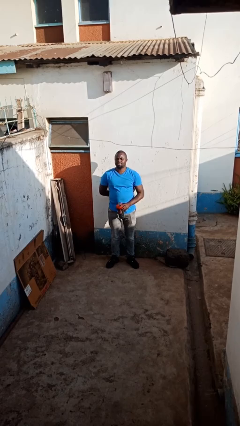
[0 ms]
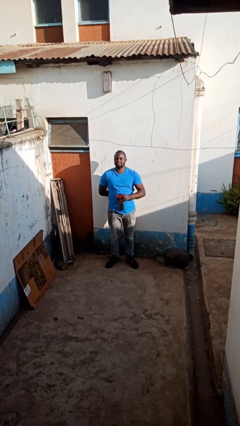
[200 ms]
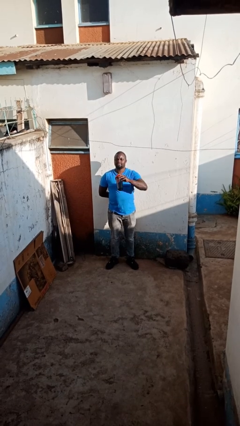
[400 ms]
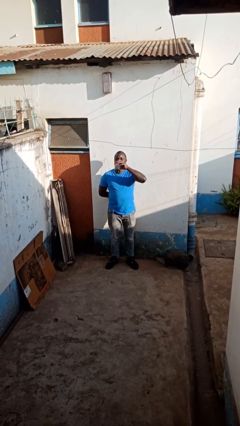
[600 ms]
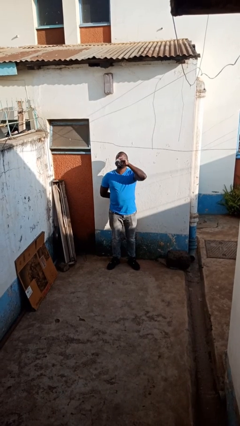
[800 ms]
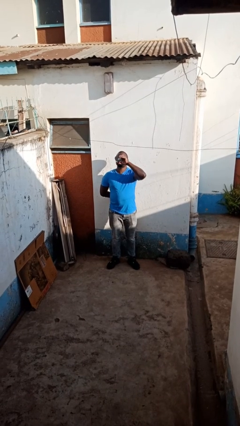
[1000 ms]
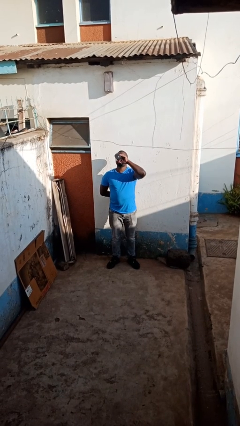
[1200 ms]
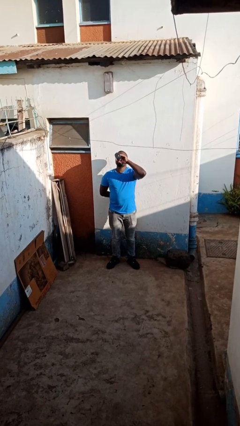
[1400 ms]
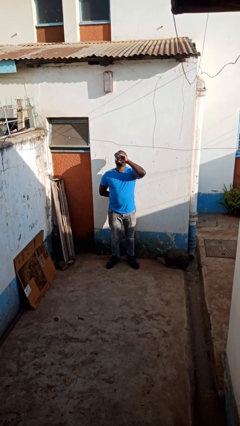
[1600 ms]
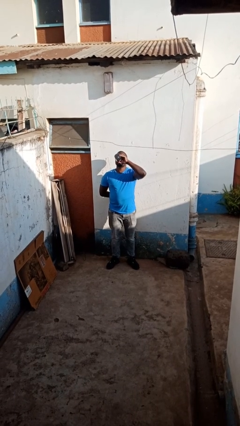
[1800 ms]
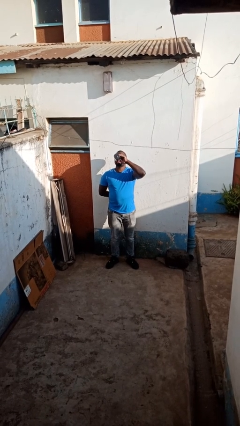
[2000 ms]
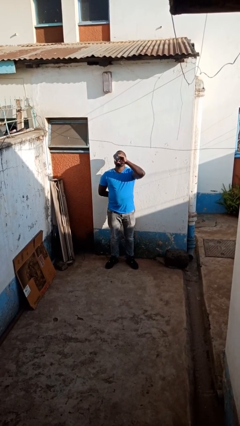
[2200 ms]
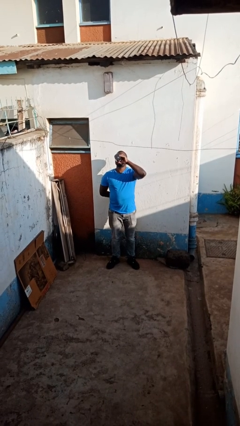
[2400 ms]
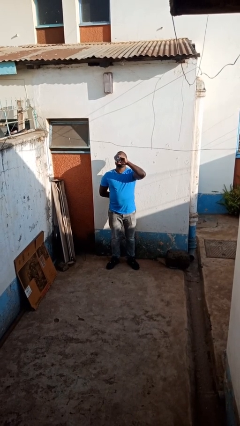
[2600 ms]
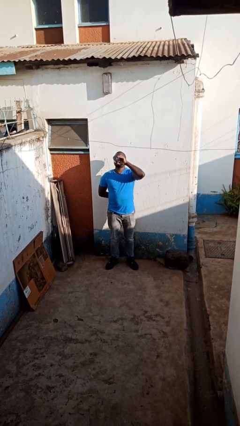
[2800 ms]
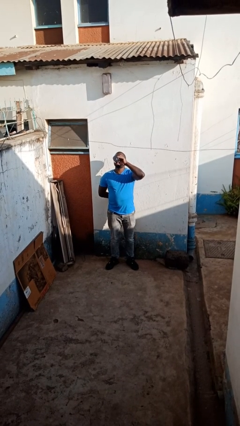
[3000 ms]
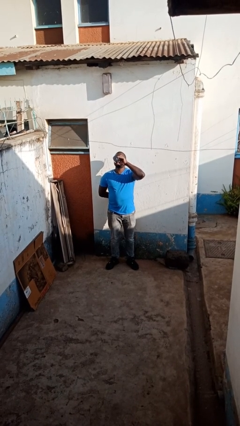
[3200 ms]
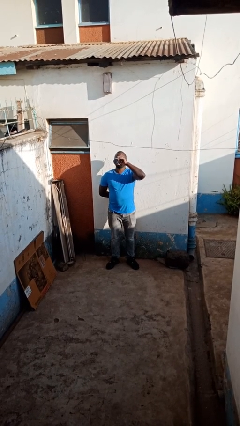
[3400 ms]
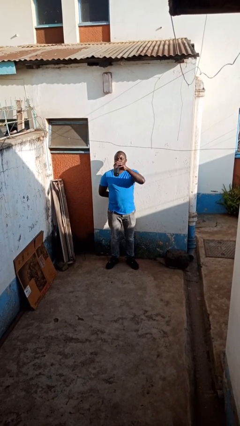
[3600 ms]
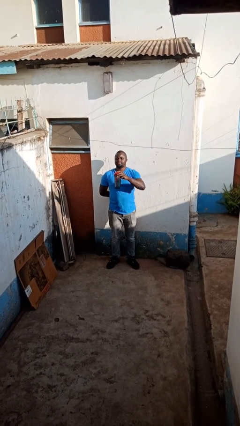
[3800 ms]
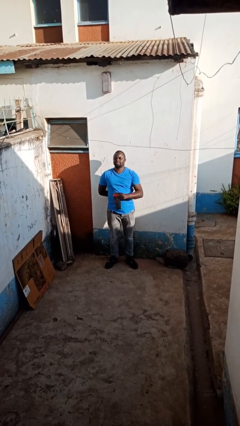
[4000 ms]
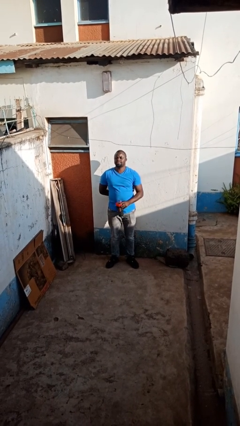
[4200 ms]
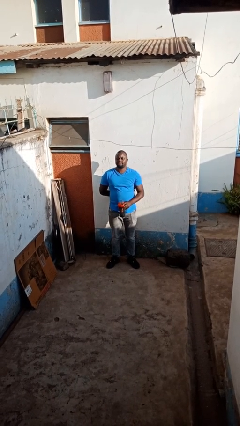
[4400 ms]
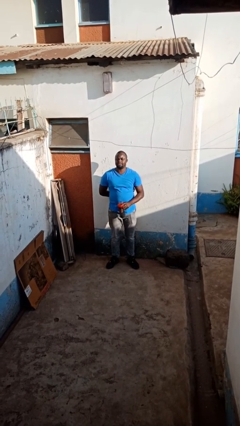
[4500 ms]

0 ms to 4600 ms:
person drinks from bottle

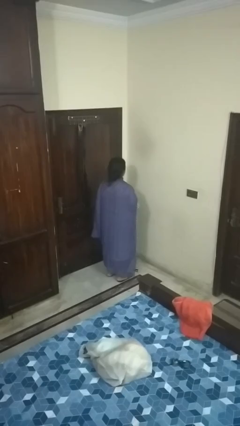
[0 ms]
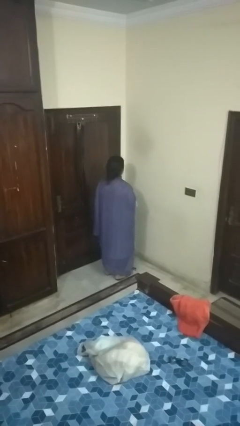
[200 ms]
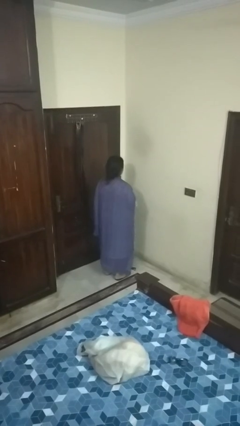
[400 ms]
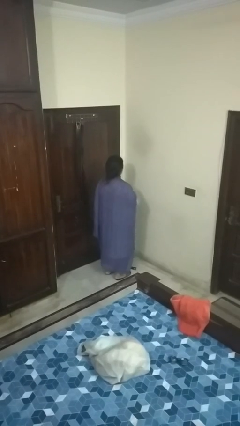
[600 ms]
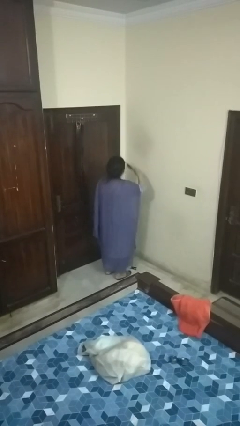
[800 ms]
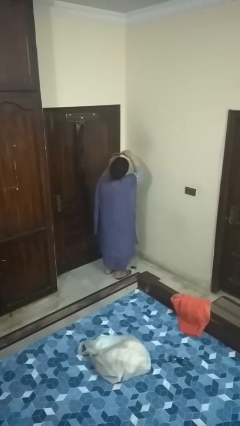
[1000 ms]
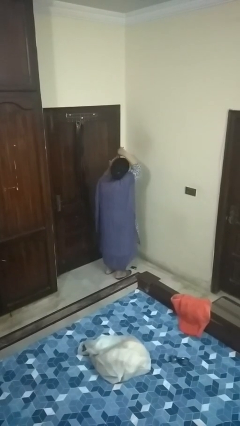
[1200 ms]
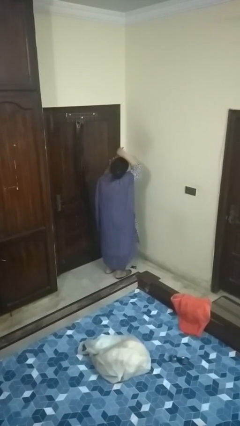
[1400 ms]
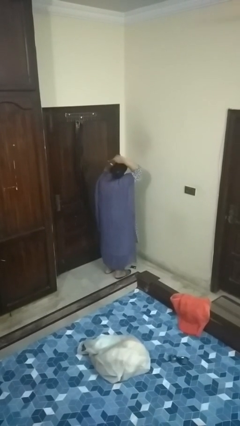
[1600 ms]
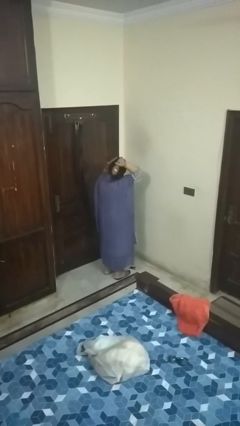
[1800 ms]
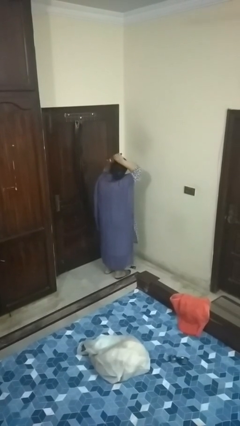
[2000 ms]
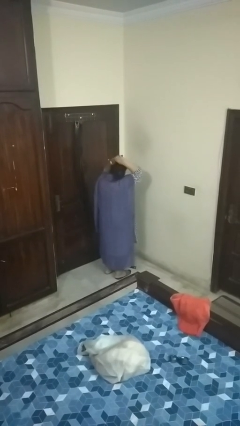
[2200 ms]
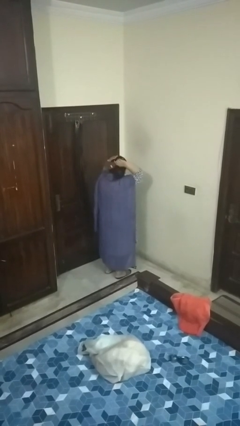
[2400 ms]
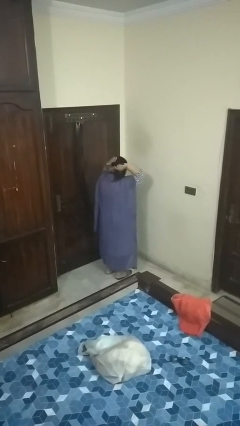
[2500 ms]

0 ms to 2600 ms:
person brushes hair

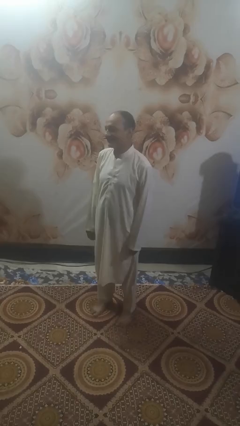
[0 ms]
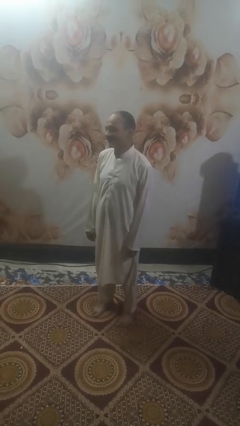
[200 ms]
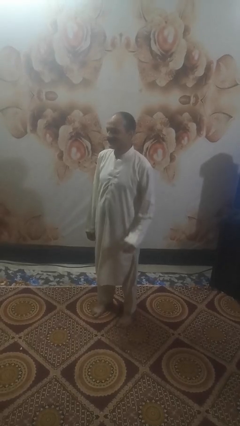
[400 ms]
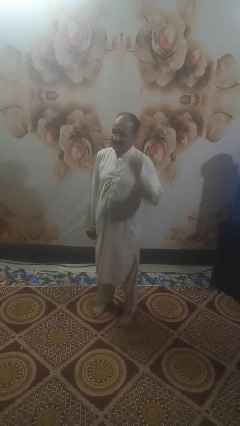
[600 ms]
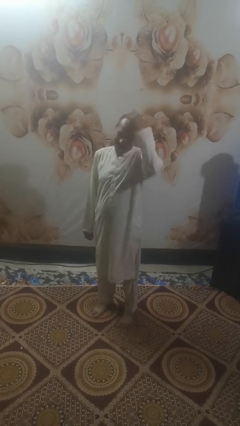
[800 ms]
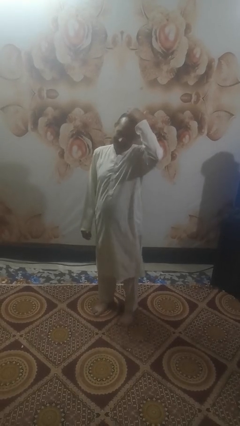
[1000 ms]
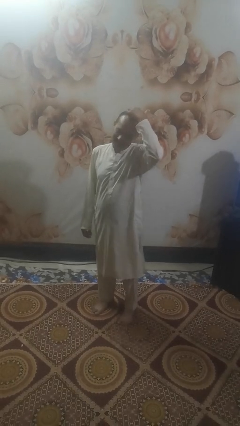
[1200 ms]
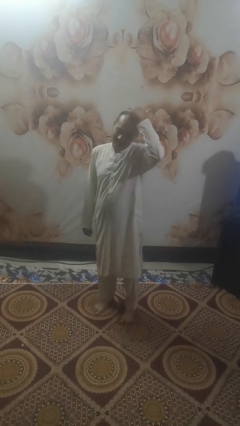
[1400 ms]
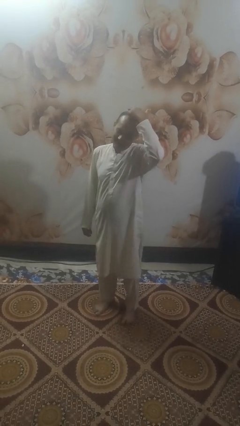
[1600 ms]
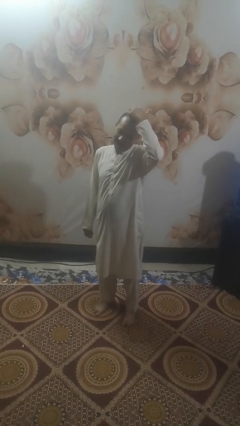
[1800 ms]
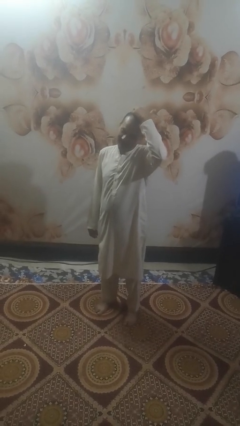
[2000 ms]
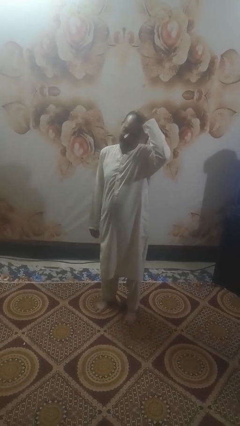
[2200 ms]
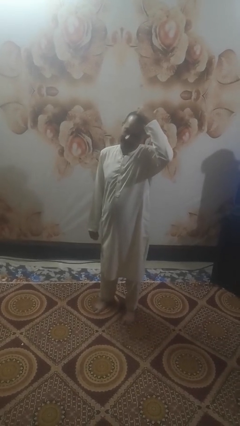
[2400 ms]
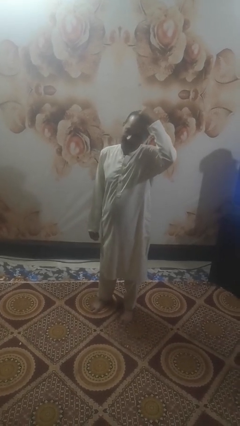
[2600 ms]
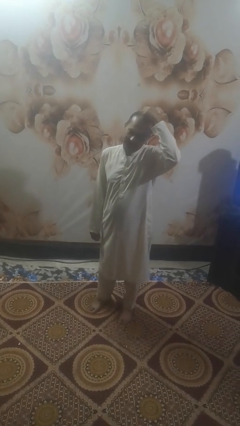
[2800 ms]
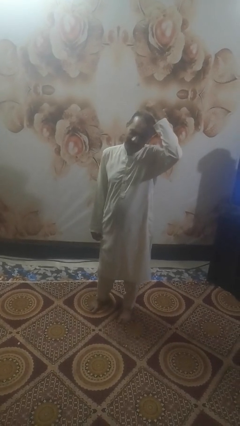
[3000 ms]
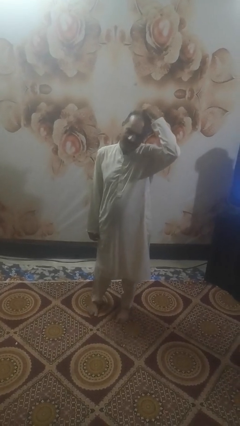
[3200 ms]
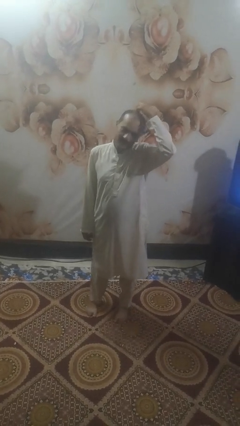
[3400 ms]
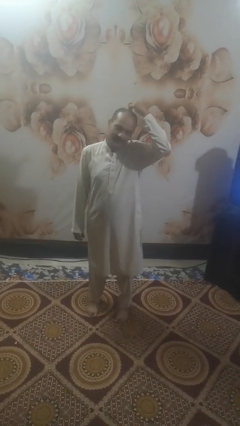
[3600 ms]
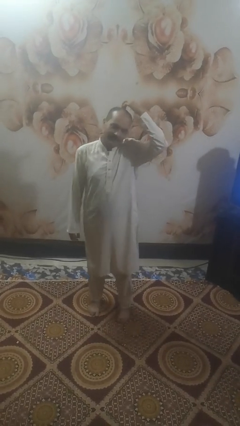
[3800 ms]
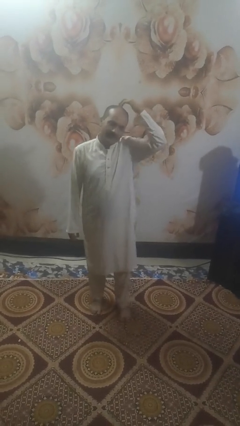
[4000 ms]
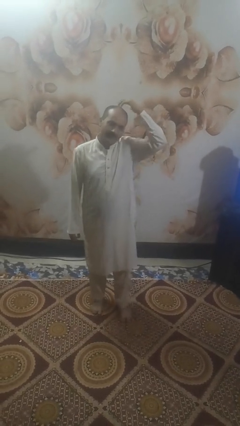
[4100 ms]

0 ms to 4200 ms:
person scratches face

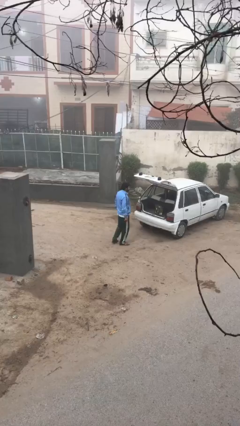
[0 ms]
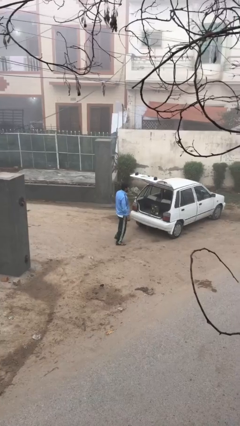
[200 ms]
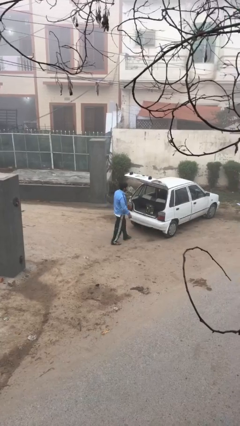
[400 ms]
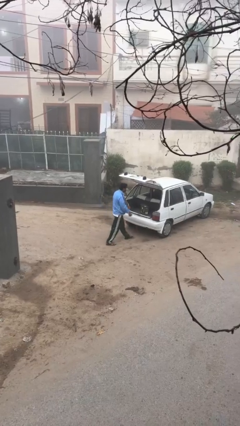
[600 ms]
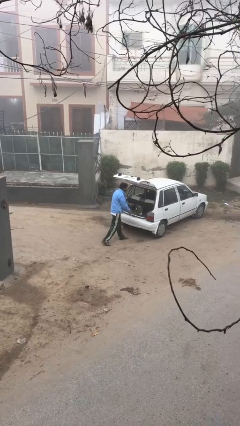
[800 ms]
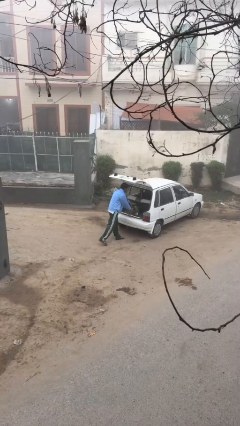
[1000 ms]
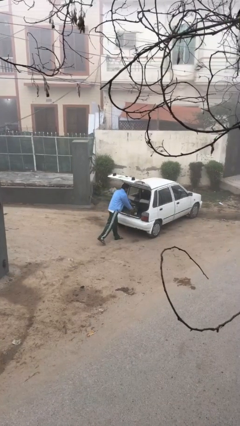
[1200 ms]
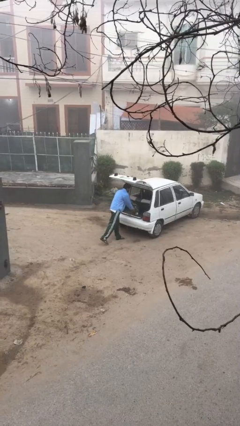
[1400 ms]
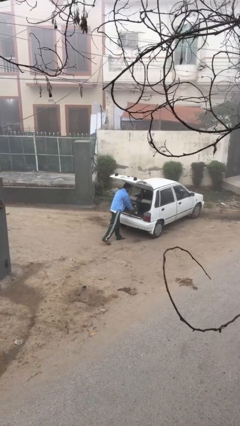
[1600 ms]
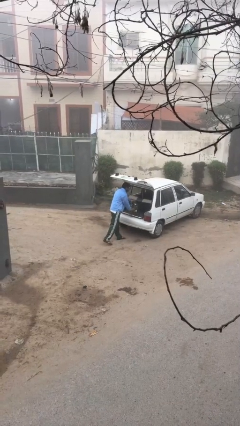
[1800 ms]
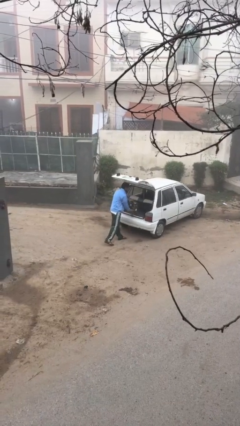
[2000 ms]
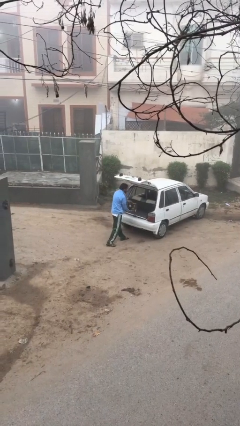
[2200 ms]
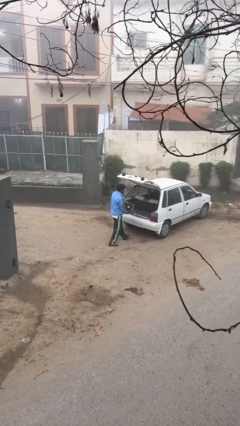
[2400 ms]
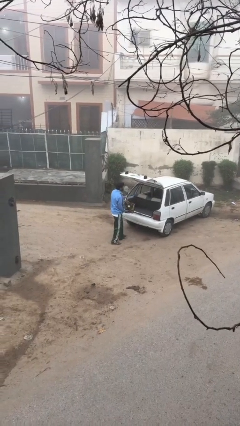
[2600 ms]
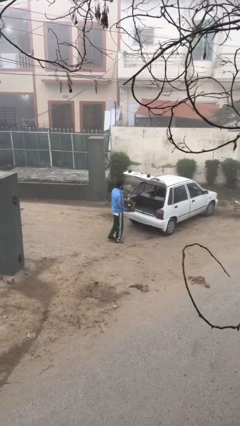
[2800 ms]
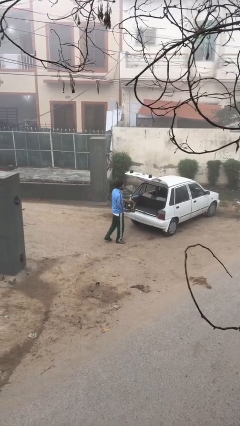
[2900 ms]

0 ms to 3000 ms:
person unloads car

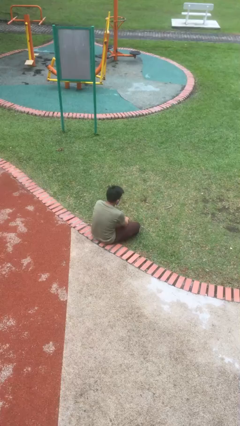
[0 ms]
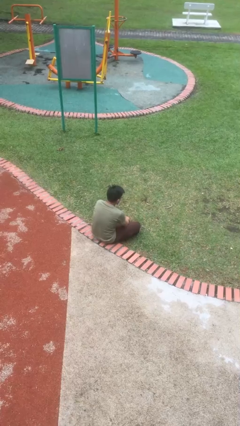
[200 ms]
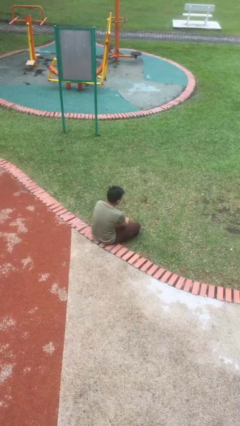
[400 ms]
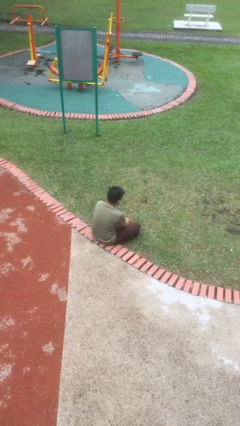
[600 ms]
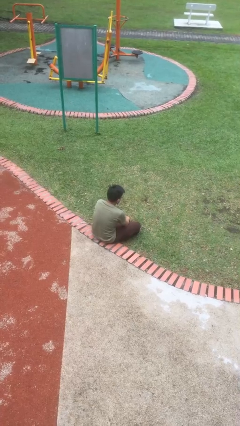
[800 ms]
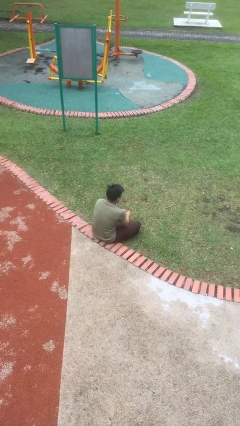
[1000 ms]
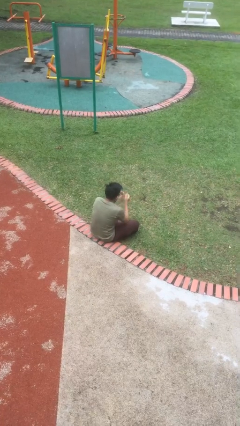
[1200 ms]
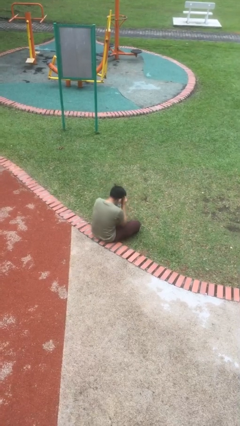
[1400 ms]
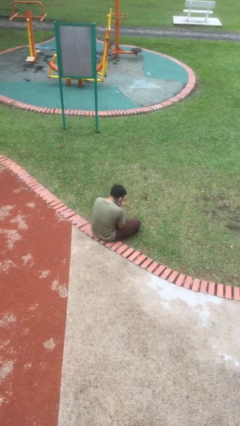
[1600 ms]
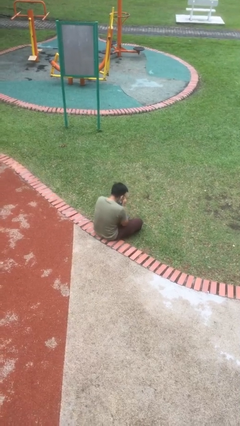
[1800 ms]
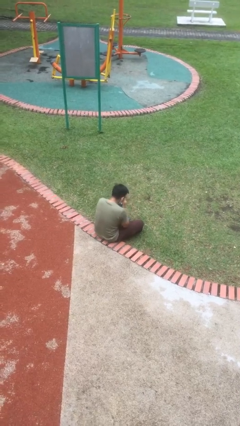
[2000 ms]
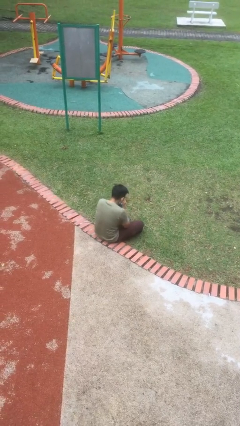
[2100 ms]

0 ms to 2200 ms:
person sneezes into hand

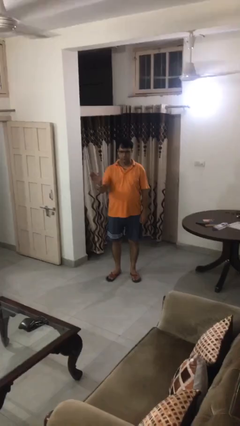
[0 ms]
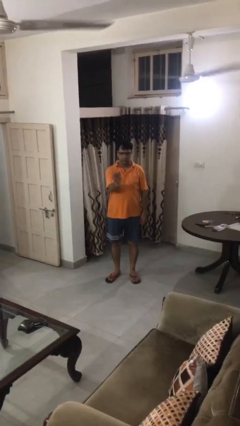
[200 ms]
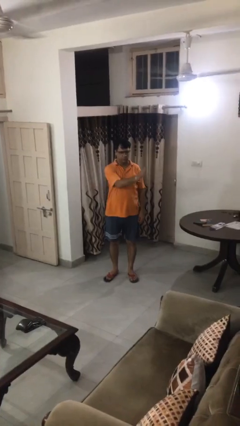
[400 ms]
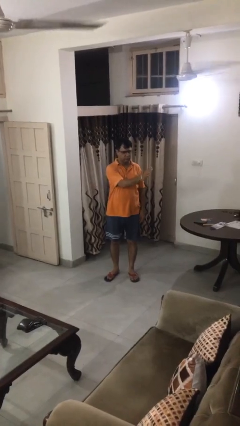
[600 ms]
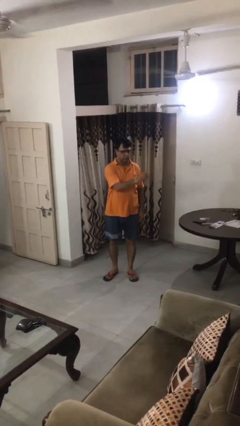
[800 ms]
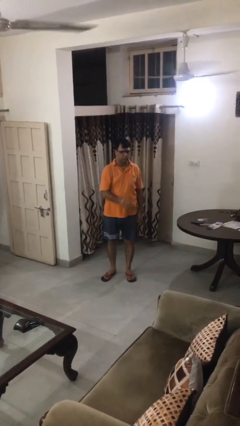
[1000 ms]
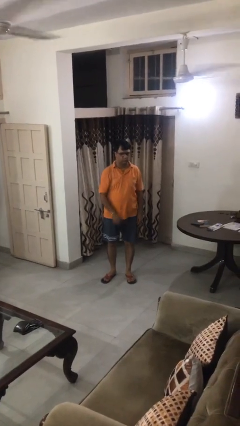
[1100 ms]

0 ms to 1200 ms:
person gestures swipe left
